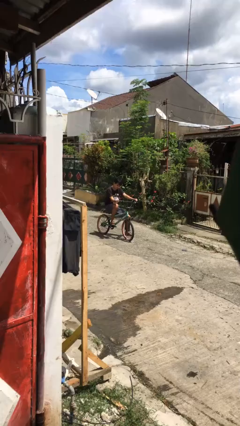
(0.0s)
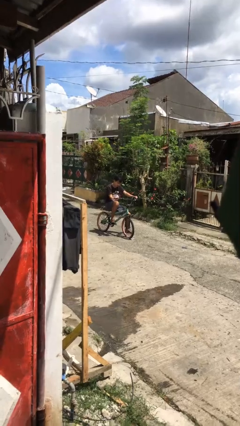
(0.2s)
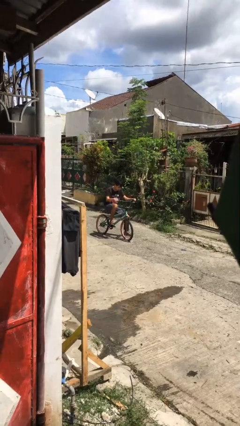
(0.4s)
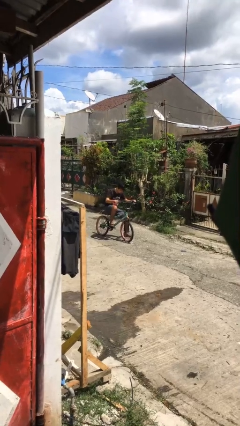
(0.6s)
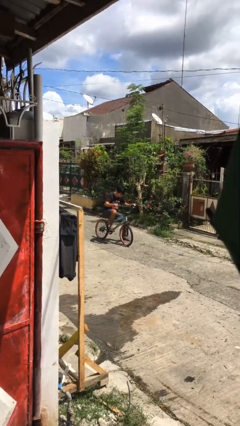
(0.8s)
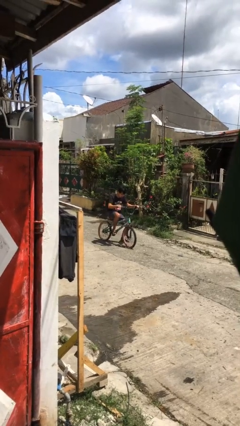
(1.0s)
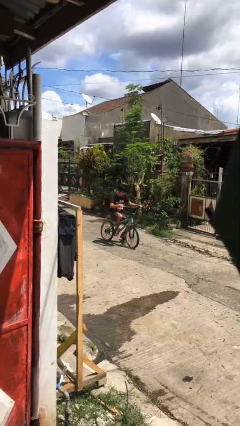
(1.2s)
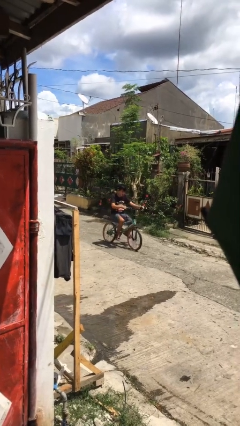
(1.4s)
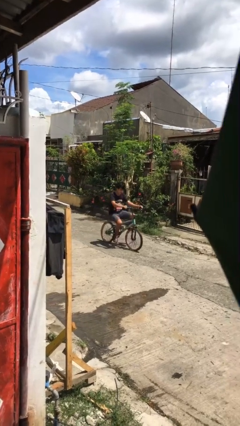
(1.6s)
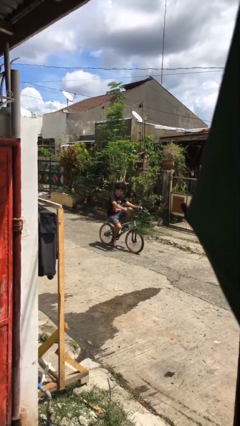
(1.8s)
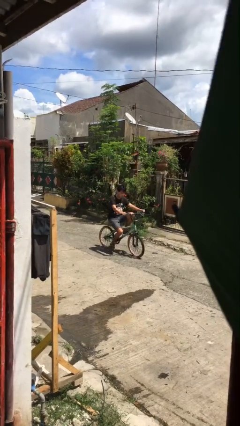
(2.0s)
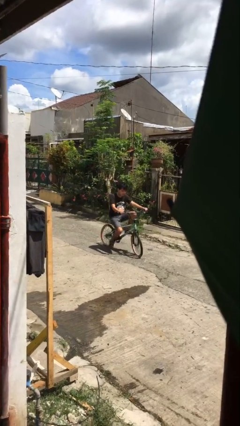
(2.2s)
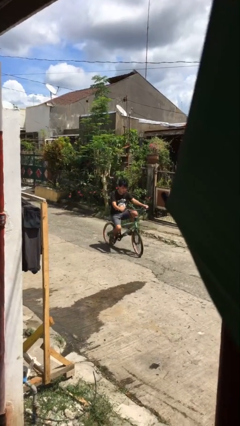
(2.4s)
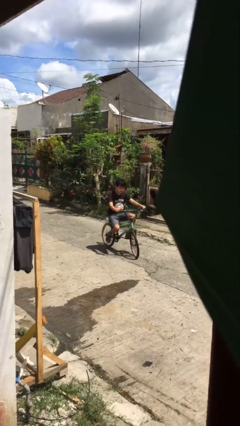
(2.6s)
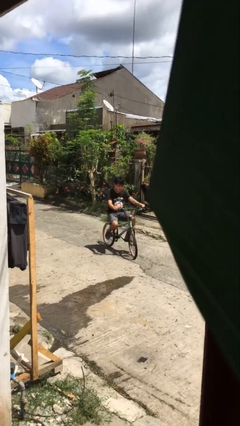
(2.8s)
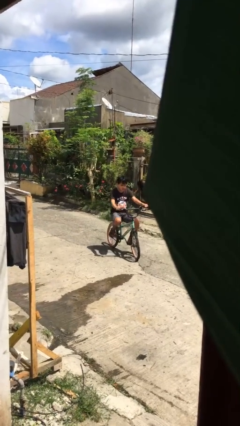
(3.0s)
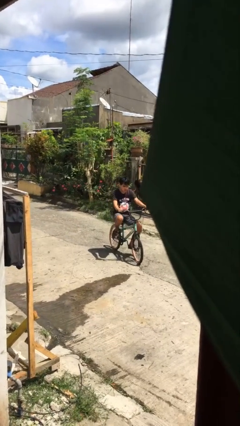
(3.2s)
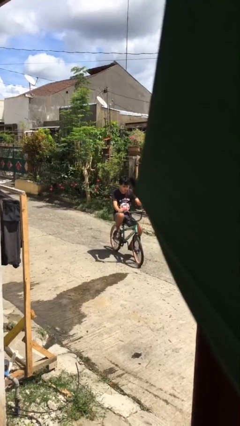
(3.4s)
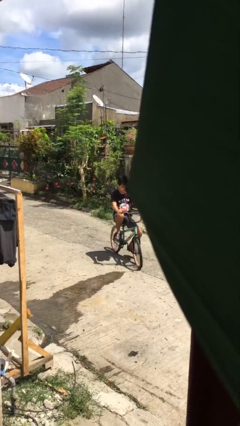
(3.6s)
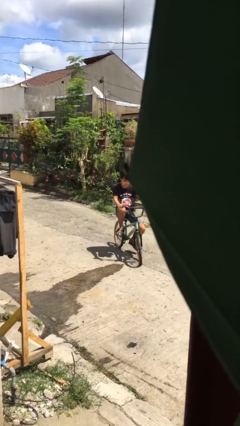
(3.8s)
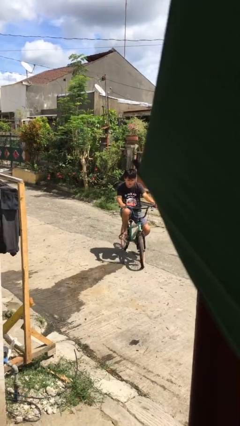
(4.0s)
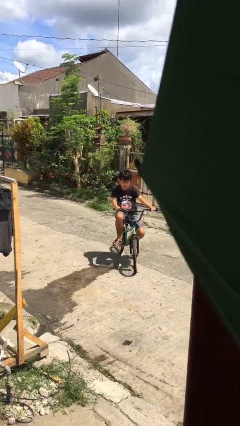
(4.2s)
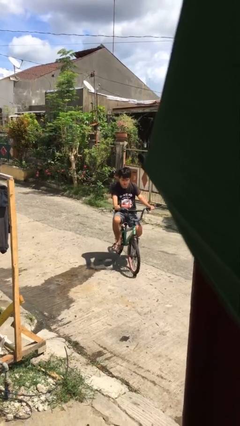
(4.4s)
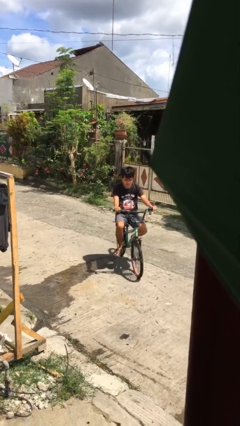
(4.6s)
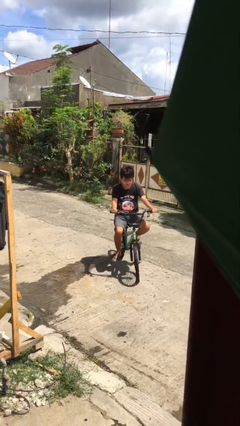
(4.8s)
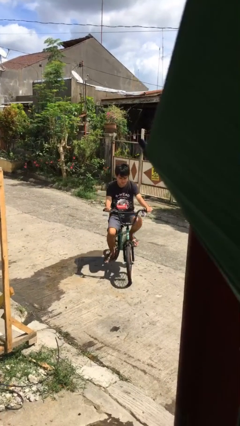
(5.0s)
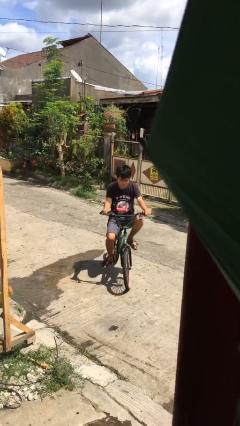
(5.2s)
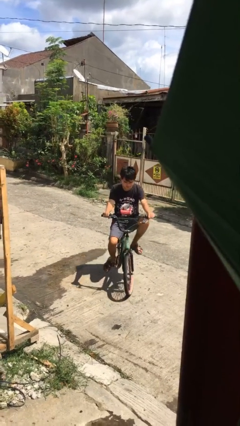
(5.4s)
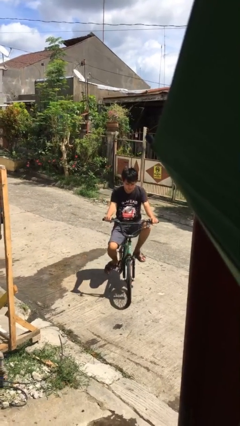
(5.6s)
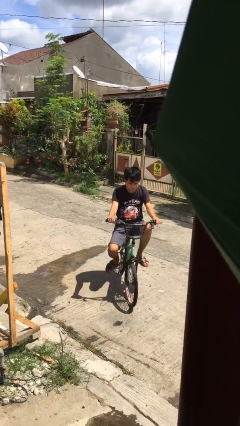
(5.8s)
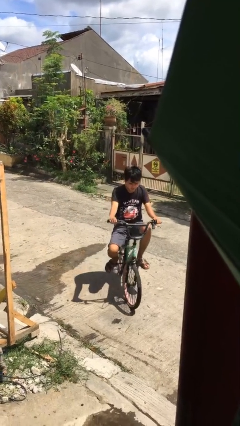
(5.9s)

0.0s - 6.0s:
person rides bicycle

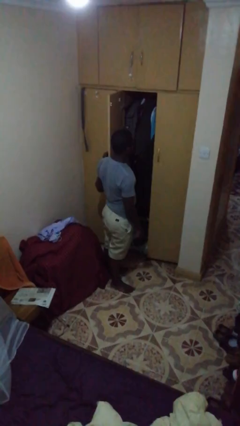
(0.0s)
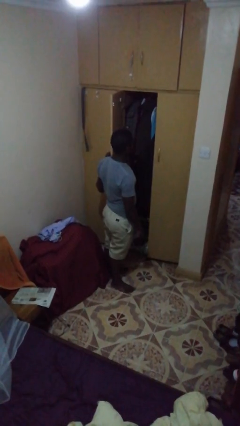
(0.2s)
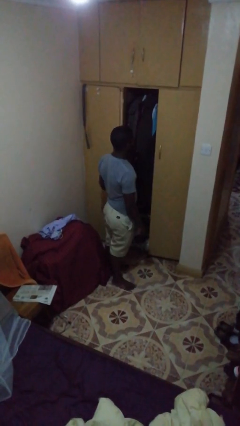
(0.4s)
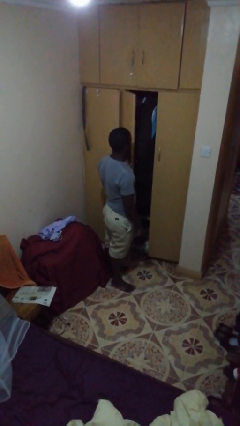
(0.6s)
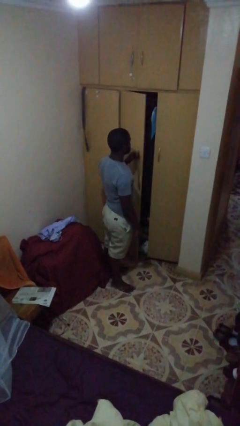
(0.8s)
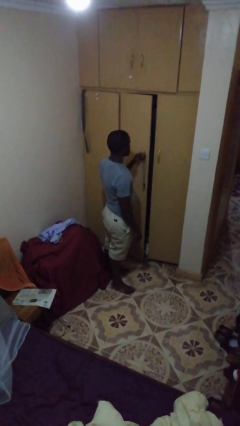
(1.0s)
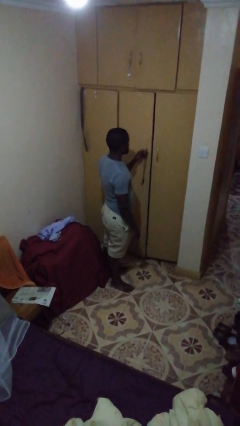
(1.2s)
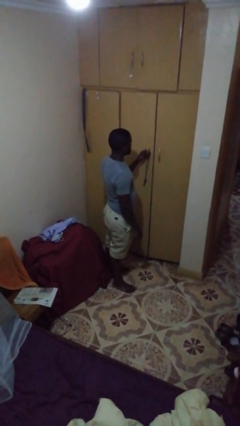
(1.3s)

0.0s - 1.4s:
person closes closet door

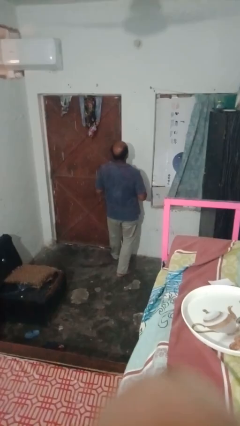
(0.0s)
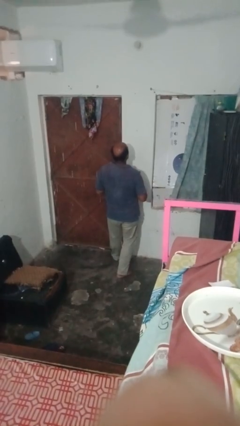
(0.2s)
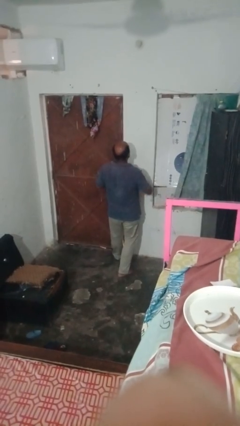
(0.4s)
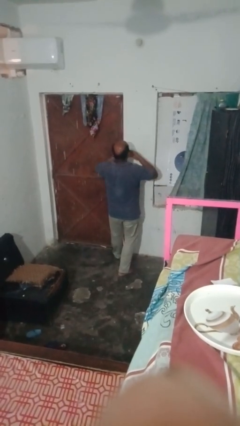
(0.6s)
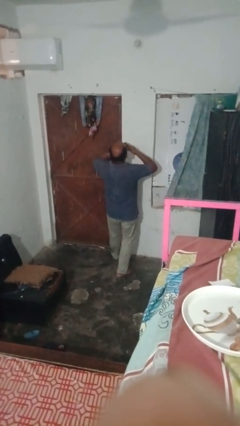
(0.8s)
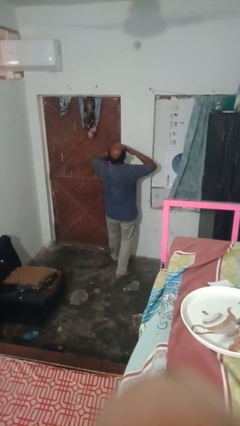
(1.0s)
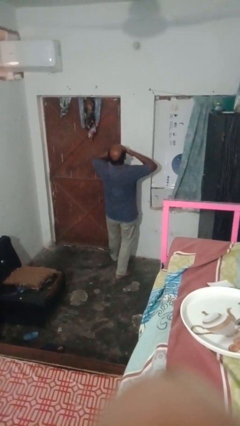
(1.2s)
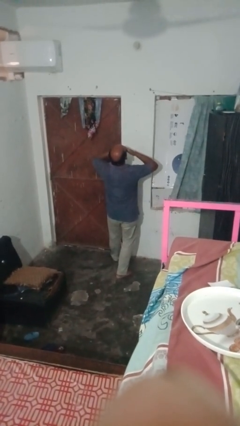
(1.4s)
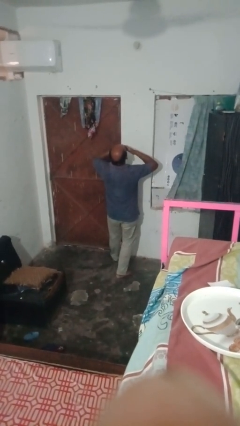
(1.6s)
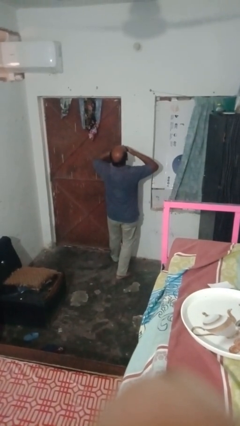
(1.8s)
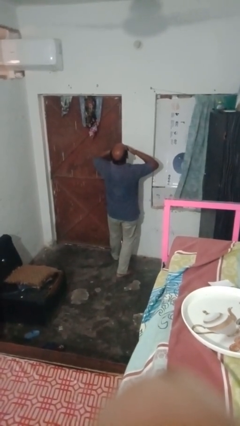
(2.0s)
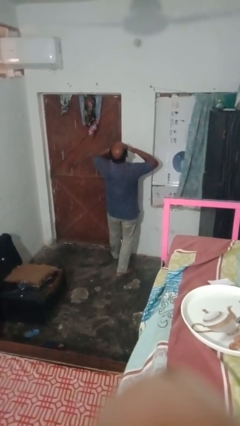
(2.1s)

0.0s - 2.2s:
person yawns

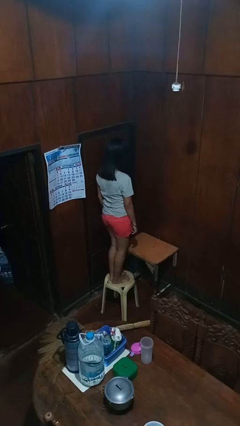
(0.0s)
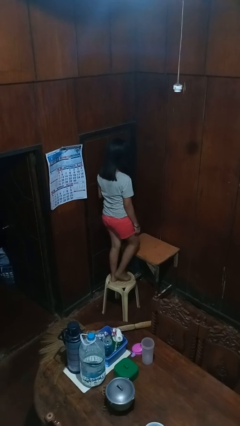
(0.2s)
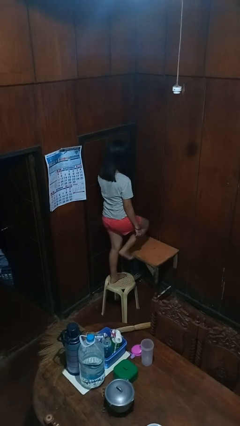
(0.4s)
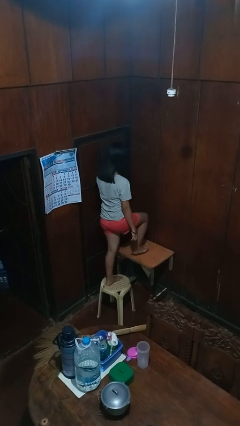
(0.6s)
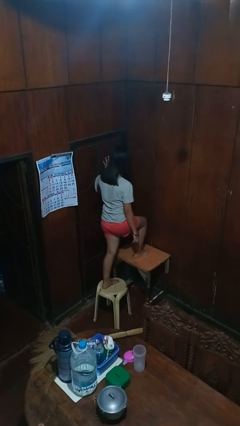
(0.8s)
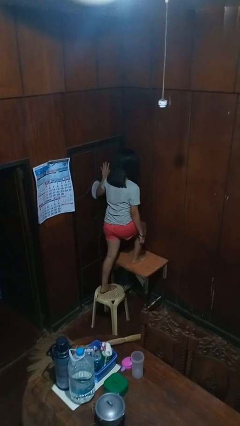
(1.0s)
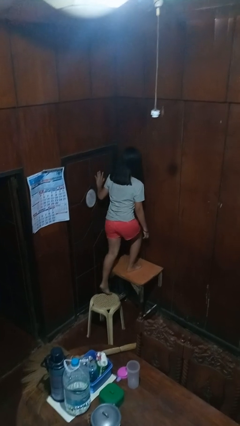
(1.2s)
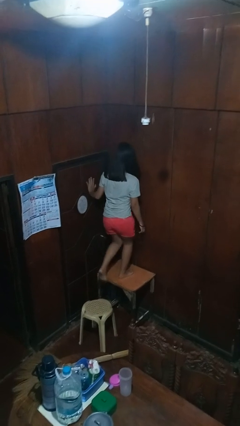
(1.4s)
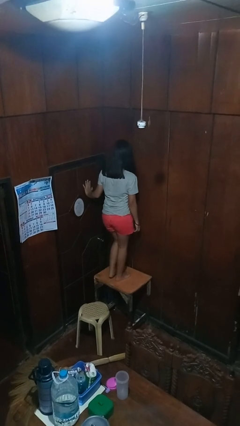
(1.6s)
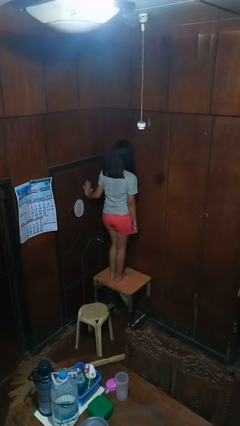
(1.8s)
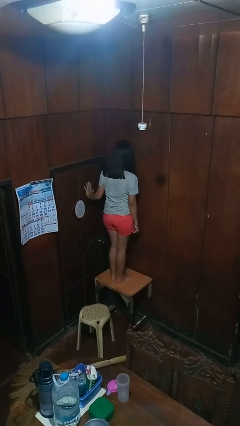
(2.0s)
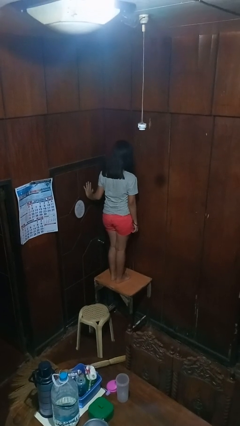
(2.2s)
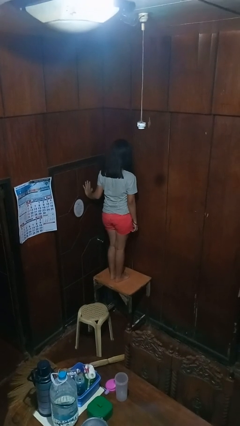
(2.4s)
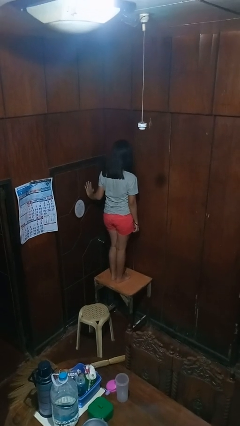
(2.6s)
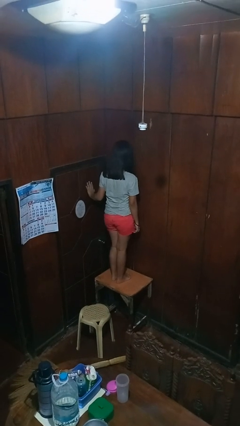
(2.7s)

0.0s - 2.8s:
person climbs on table

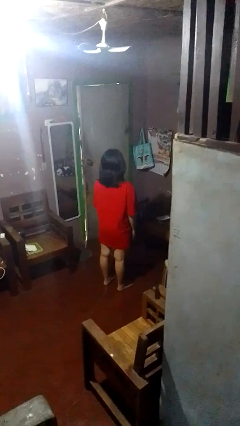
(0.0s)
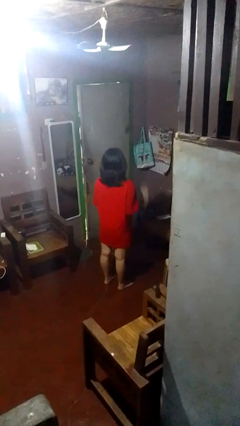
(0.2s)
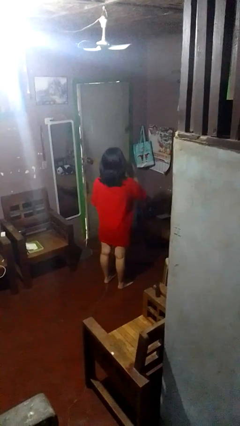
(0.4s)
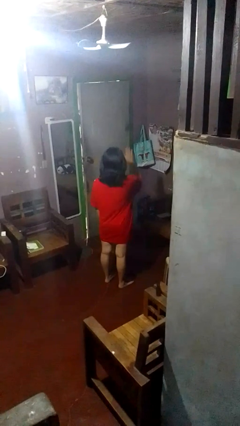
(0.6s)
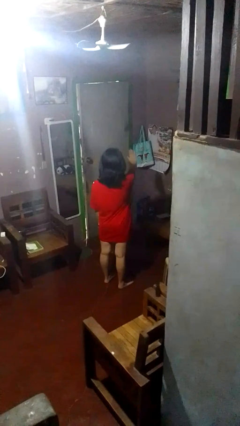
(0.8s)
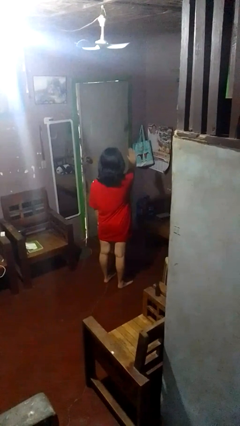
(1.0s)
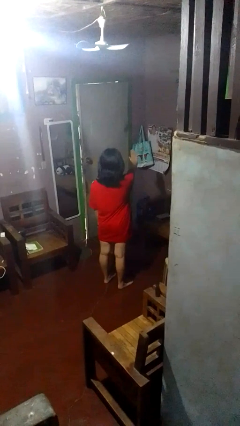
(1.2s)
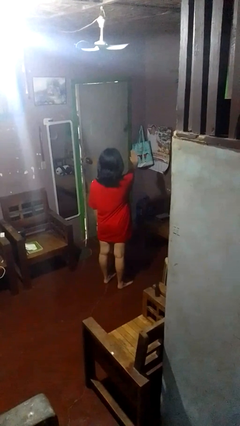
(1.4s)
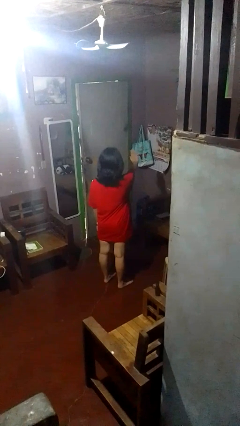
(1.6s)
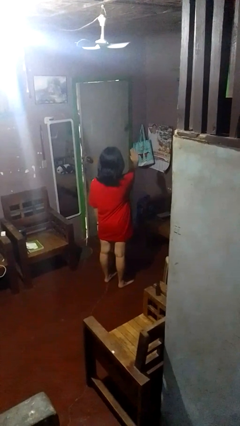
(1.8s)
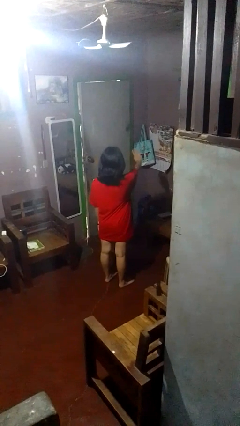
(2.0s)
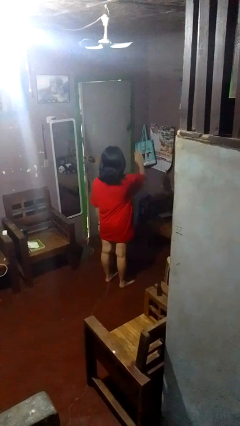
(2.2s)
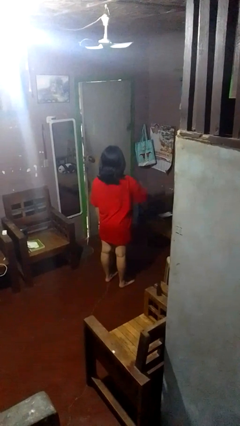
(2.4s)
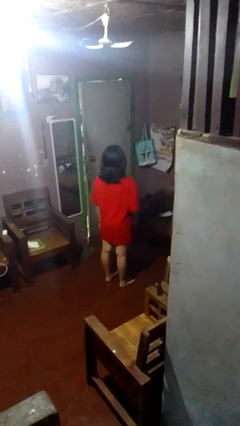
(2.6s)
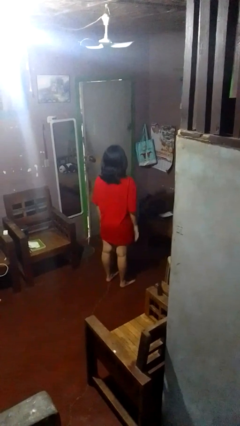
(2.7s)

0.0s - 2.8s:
person gestures stop

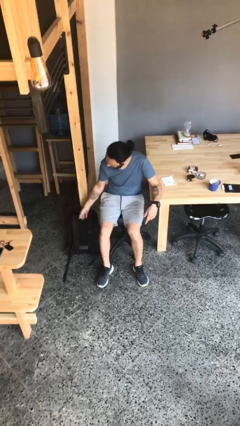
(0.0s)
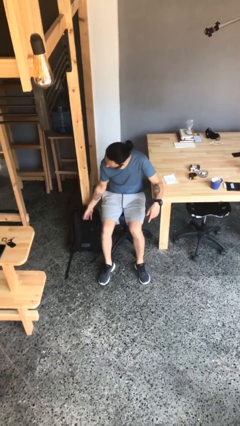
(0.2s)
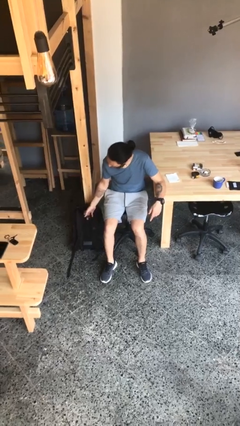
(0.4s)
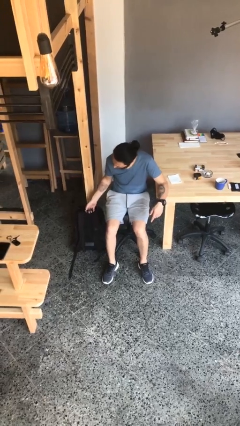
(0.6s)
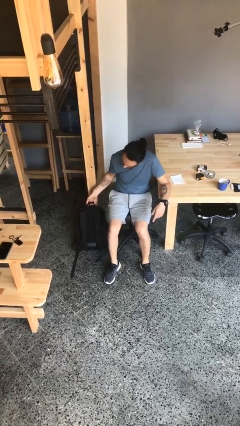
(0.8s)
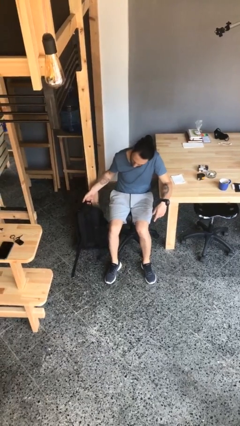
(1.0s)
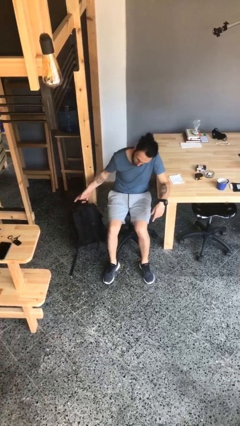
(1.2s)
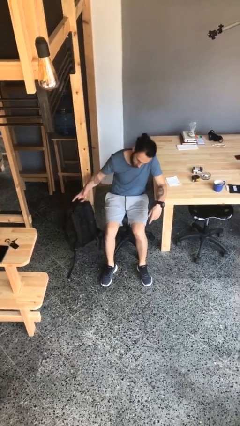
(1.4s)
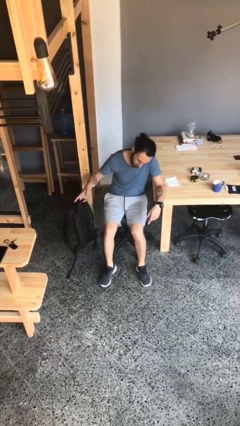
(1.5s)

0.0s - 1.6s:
person picks up object from floor

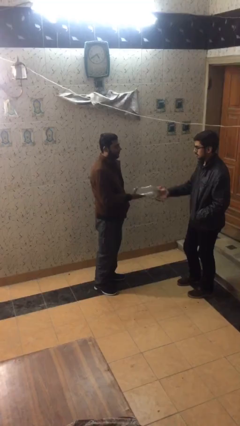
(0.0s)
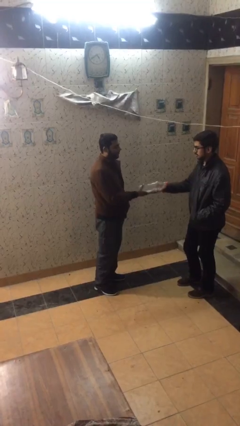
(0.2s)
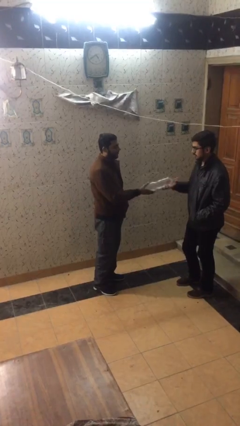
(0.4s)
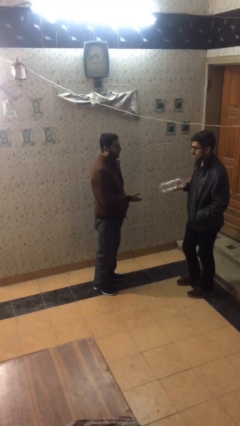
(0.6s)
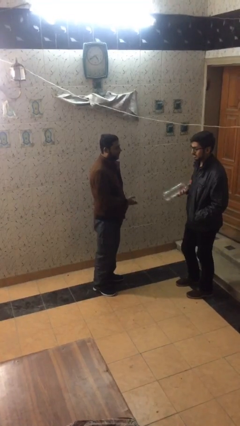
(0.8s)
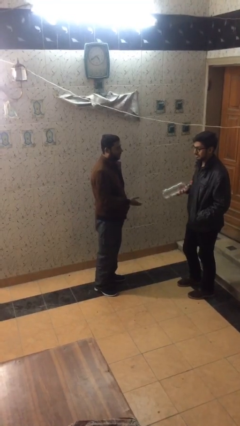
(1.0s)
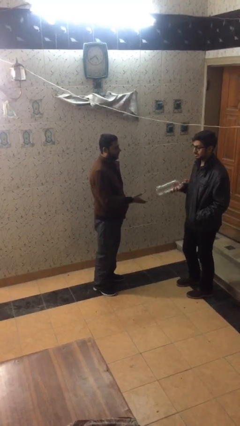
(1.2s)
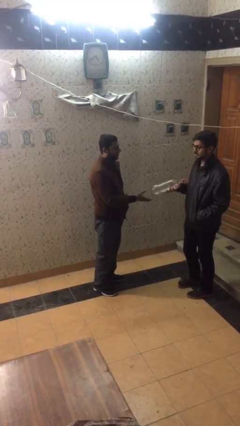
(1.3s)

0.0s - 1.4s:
person transfers object to person
